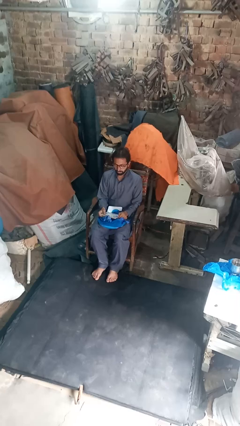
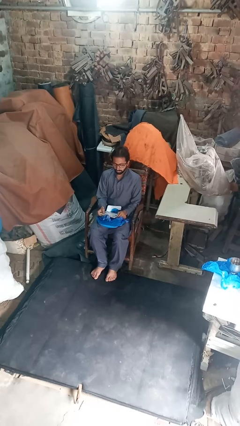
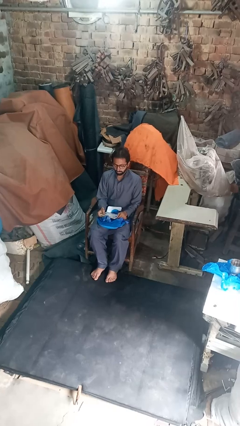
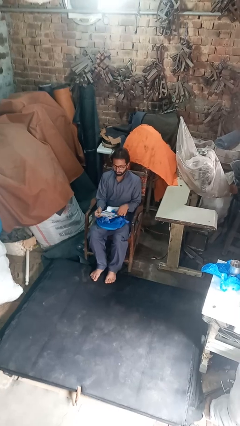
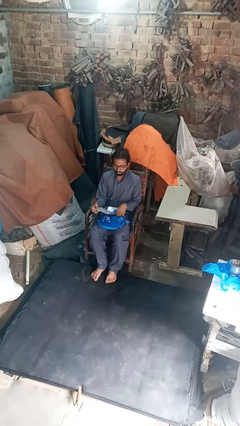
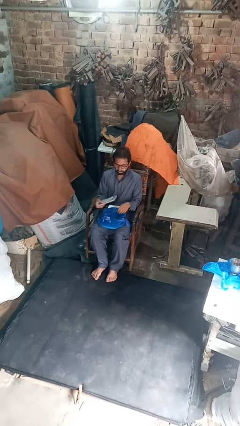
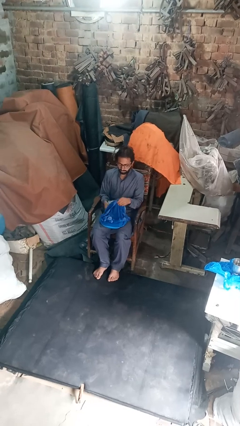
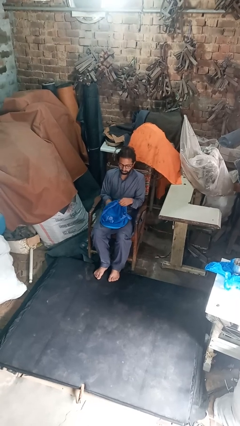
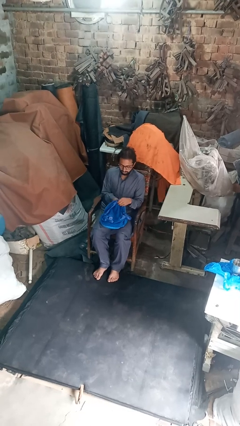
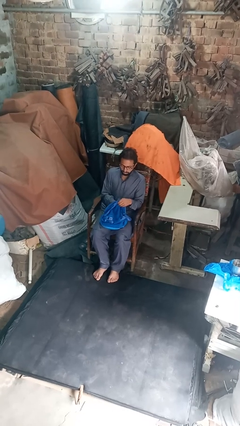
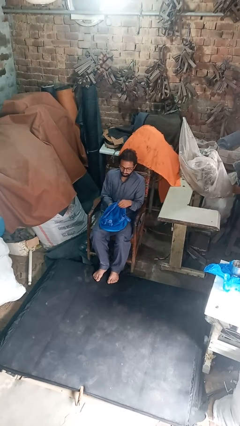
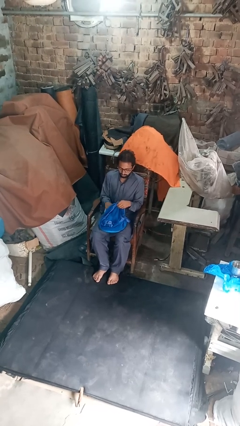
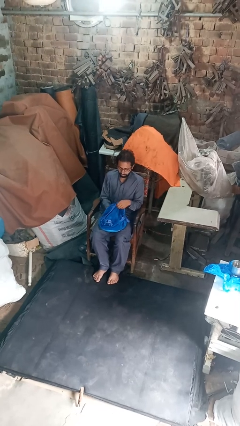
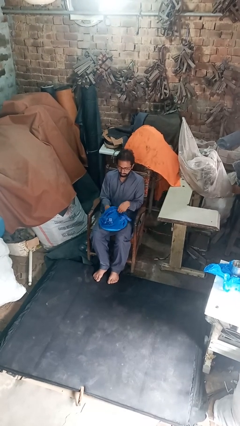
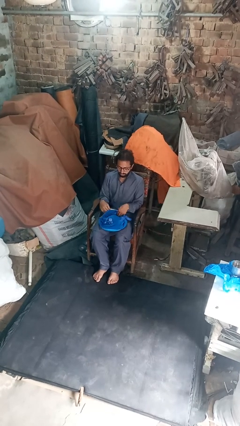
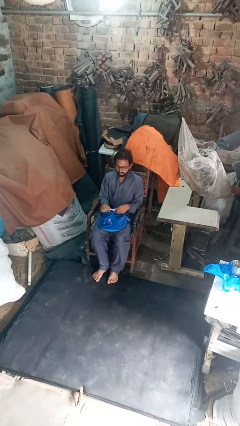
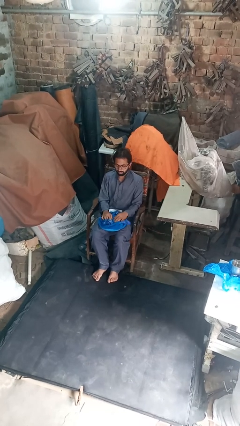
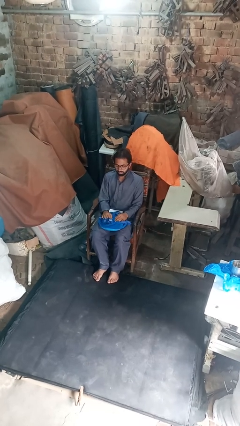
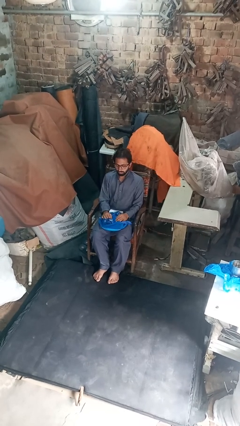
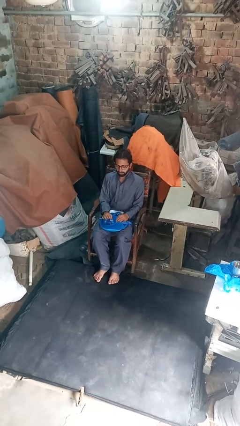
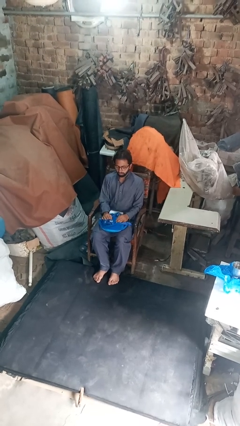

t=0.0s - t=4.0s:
person puts object into backpack

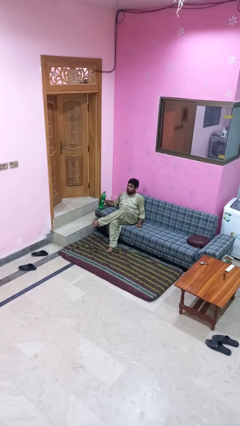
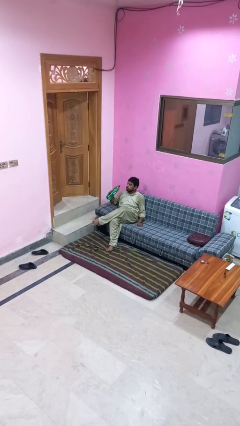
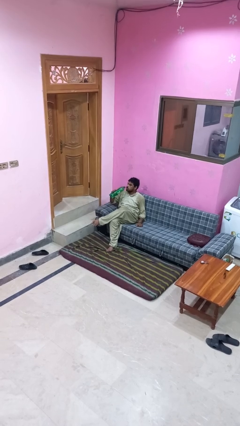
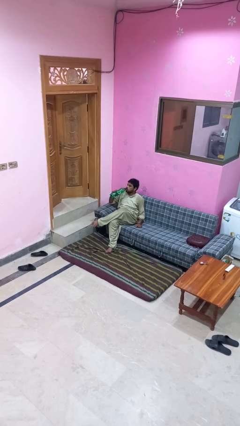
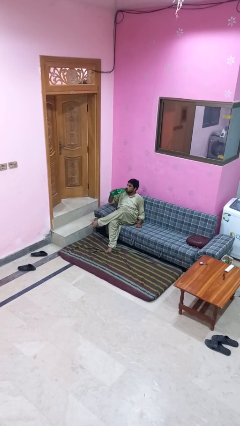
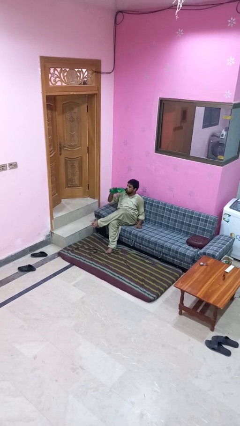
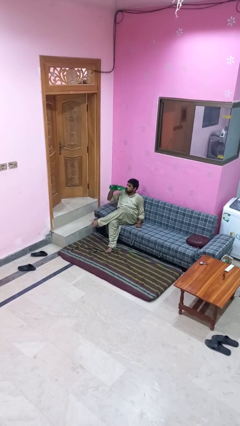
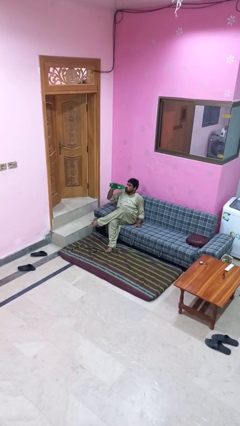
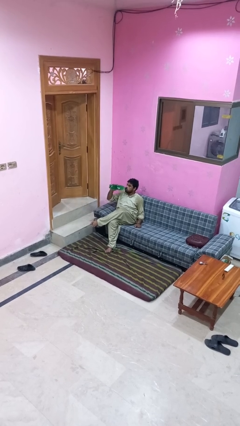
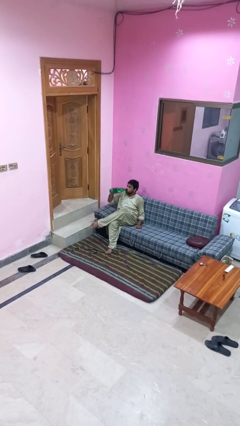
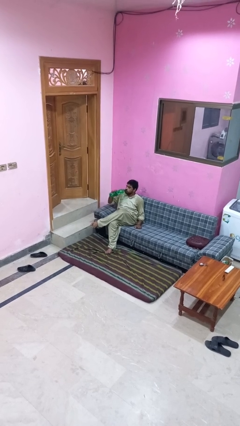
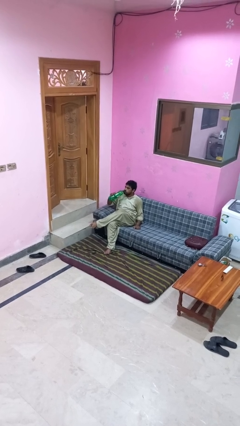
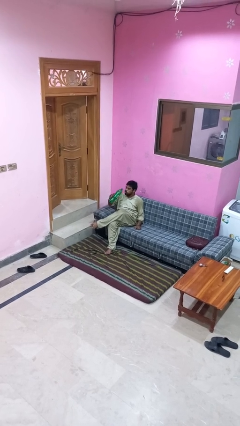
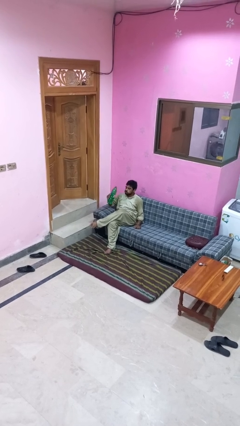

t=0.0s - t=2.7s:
person drinks from bottle

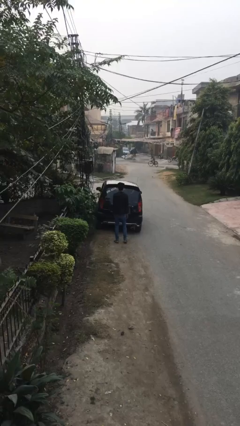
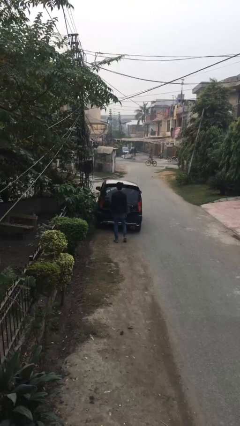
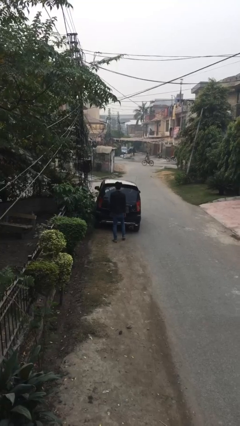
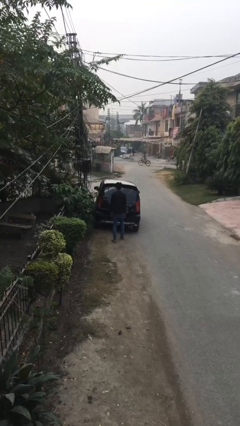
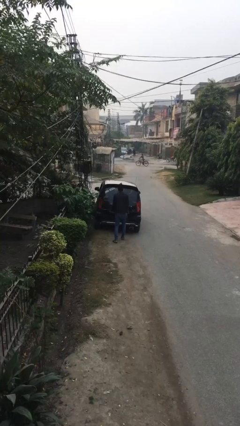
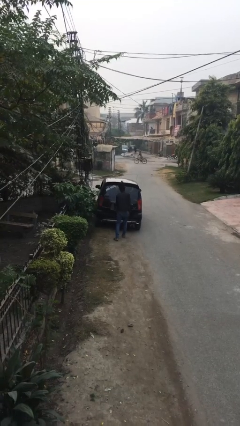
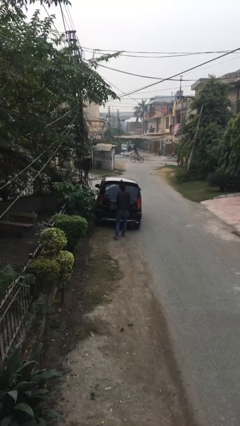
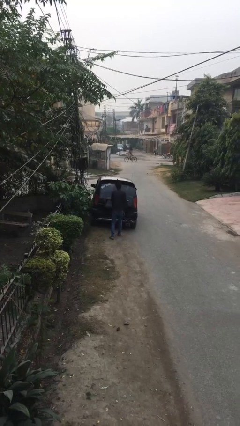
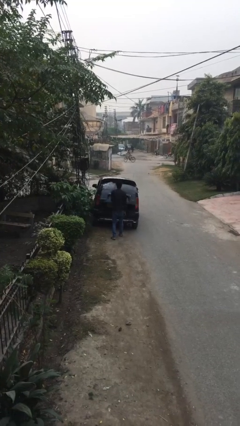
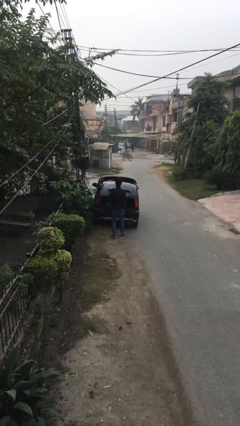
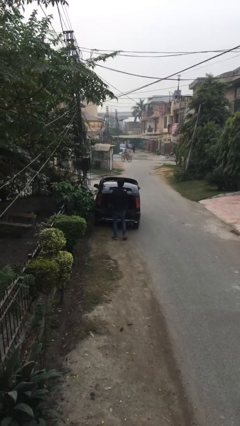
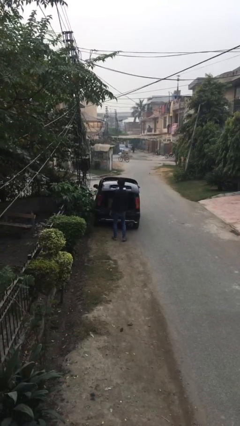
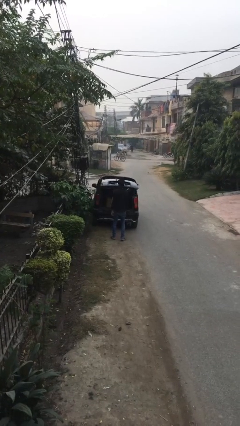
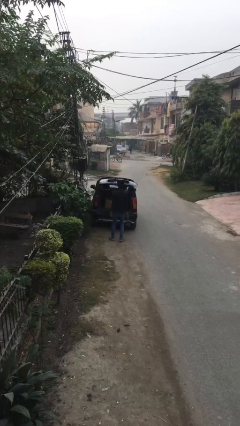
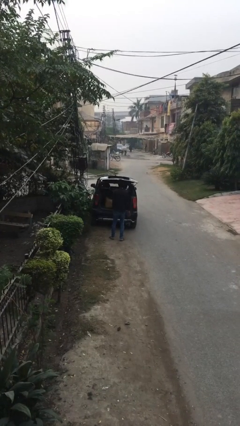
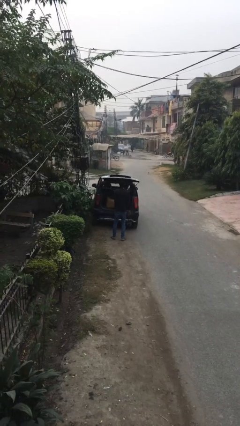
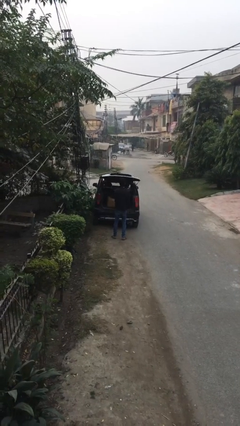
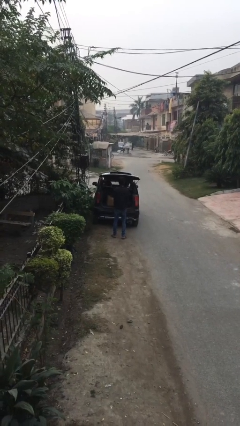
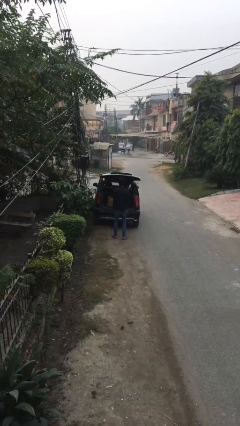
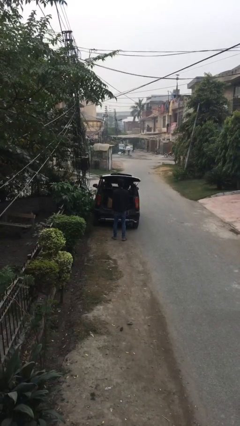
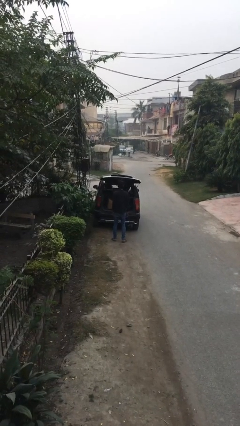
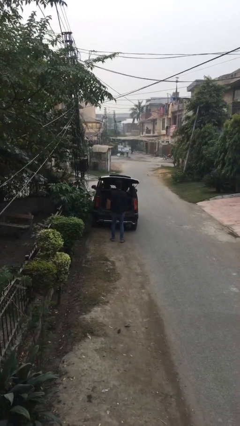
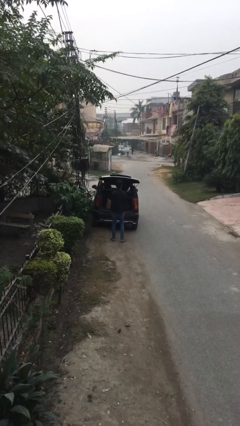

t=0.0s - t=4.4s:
person opens car trunk

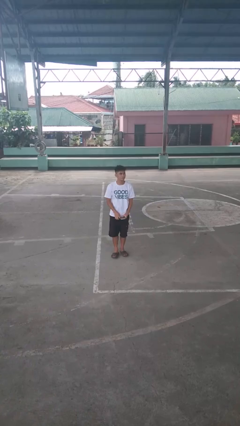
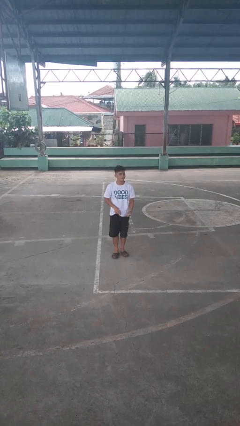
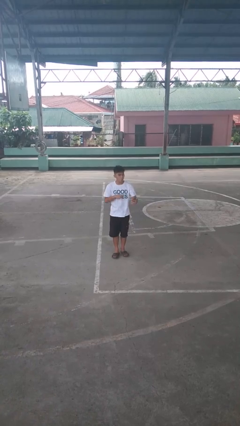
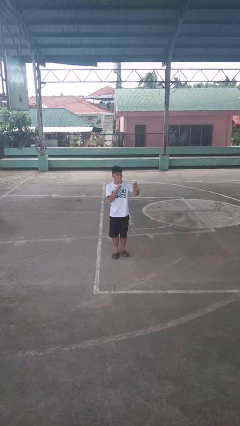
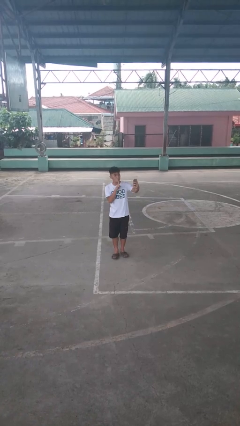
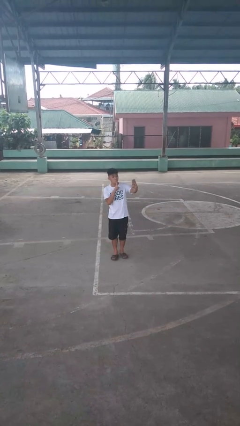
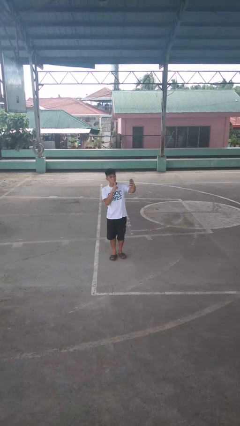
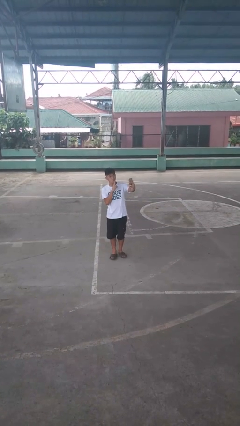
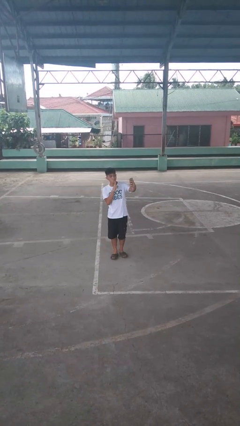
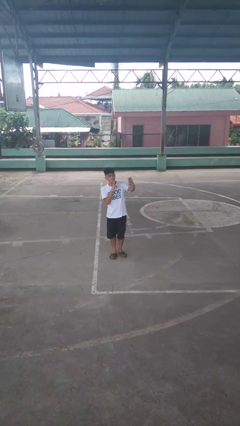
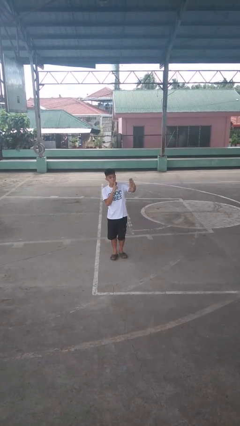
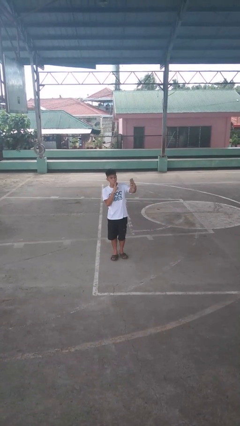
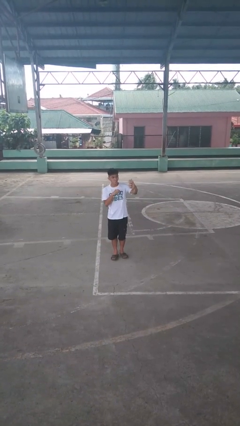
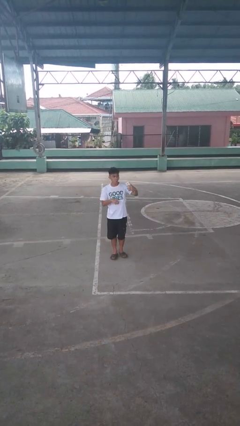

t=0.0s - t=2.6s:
person takes selfie

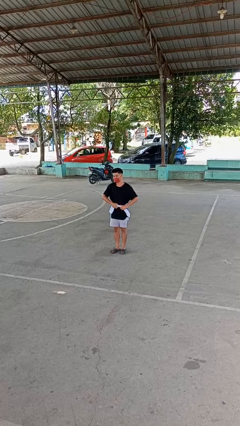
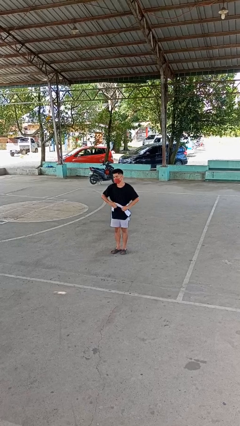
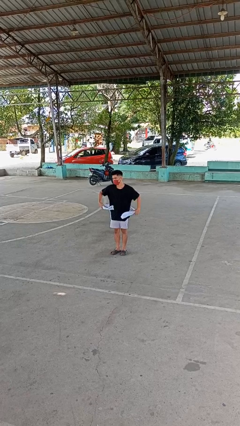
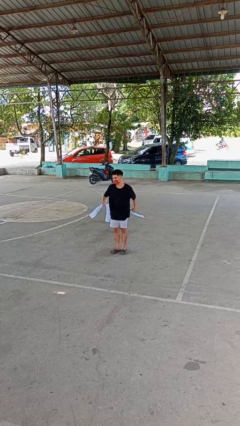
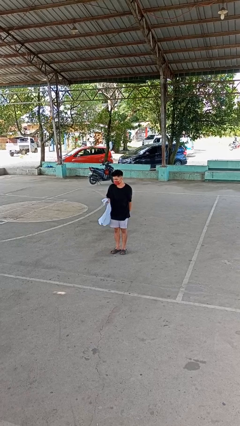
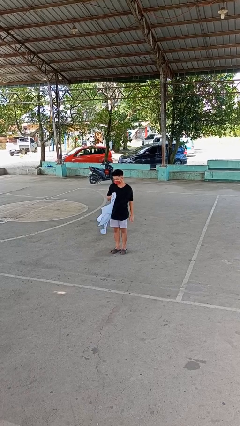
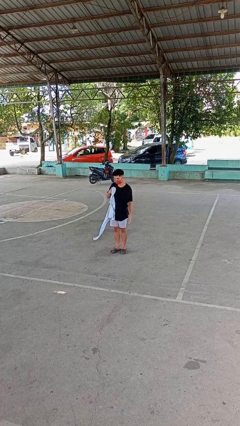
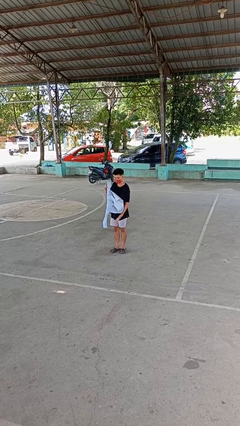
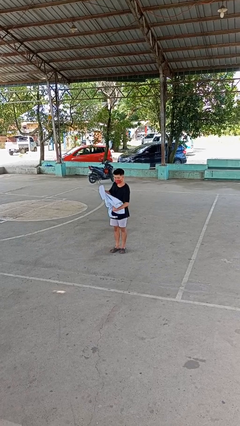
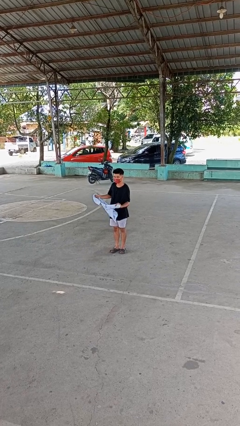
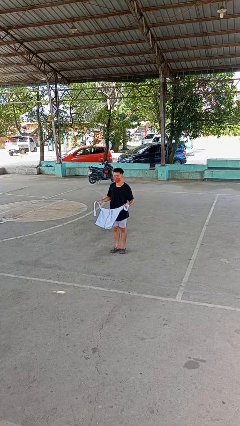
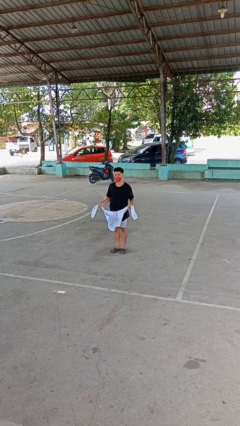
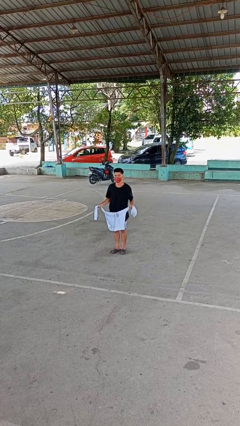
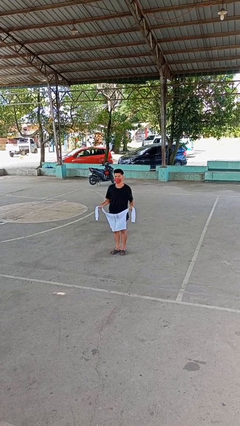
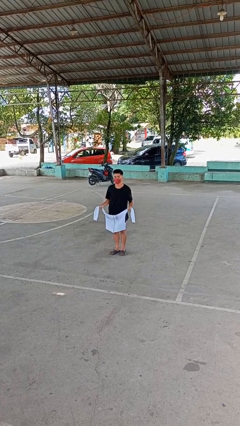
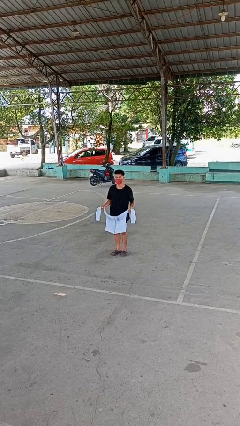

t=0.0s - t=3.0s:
person unties jacket around waist

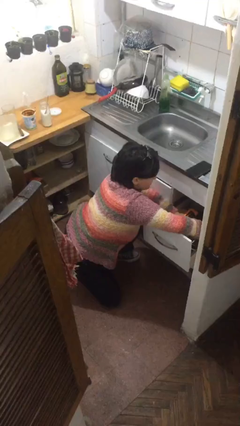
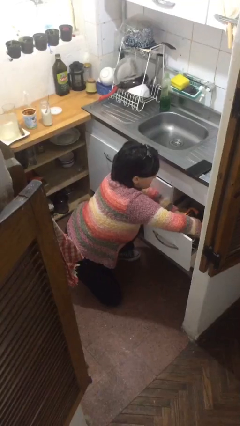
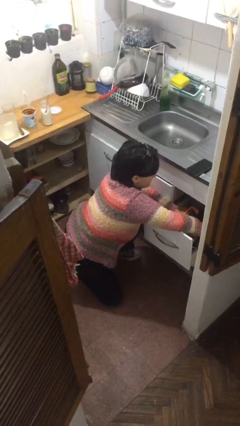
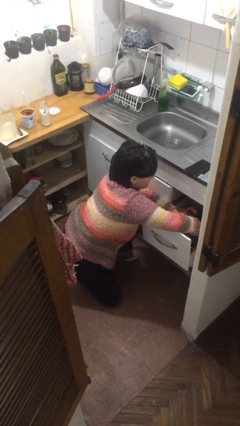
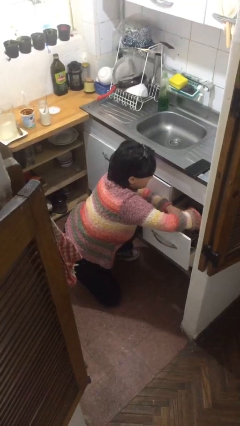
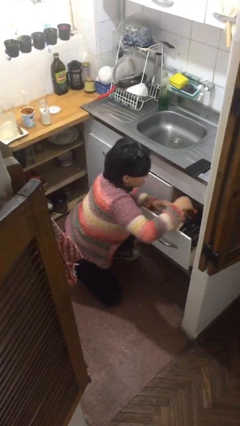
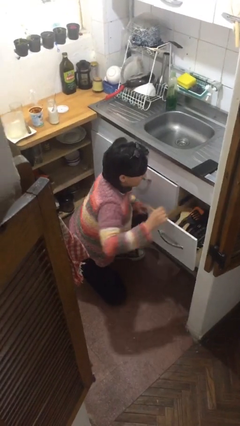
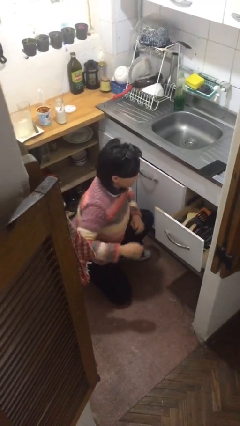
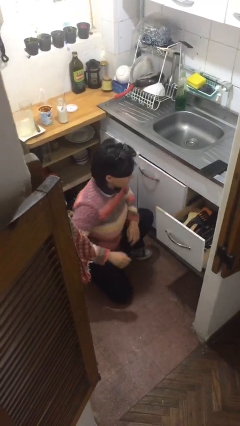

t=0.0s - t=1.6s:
person searches in kitchen drawer
